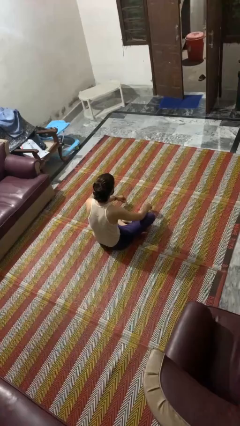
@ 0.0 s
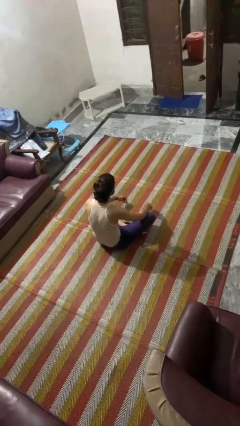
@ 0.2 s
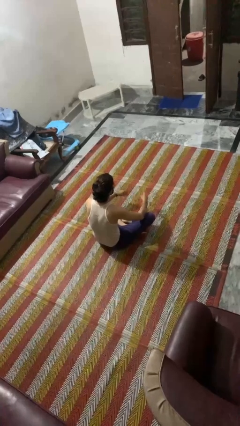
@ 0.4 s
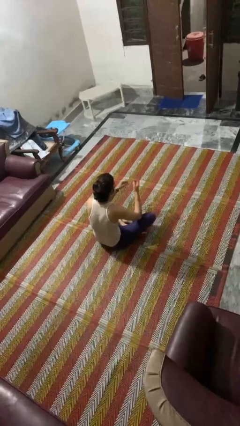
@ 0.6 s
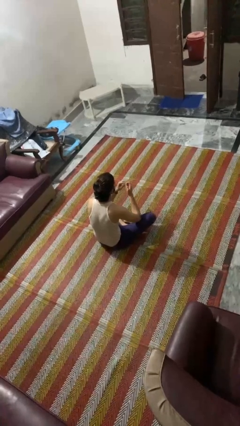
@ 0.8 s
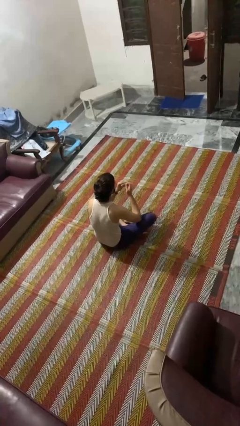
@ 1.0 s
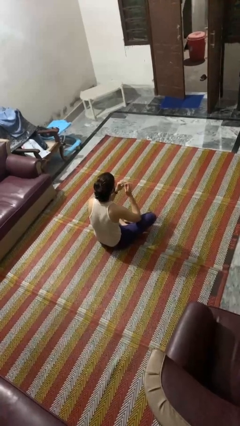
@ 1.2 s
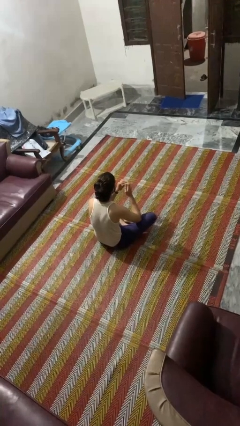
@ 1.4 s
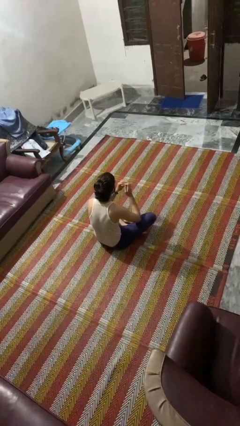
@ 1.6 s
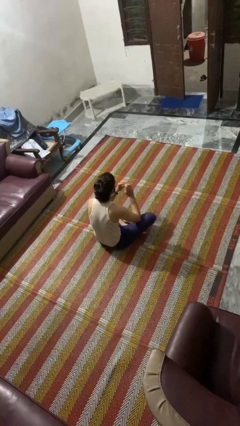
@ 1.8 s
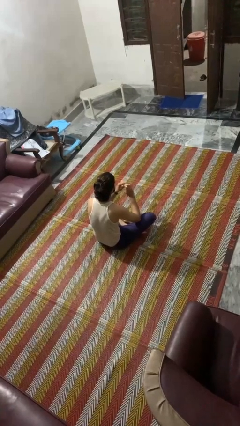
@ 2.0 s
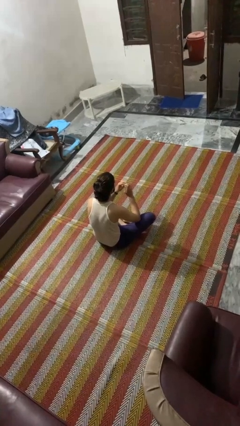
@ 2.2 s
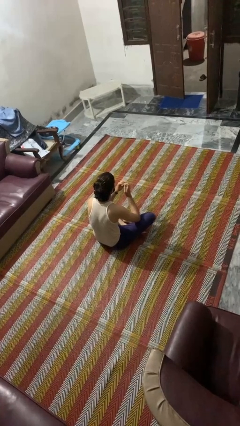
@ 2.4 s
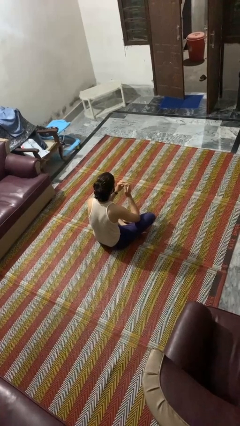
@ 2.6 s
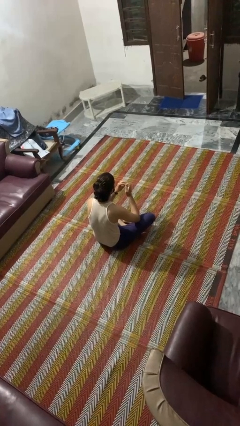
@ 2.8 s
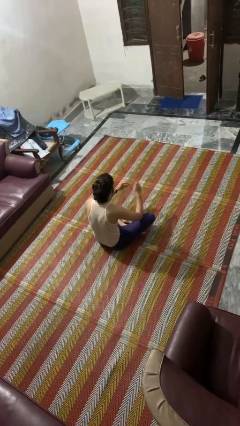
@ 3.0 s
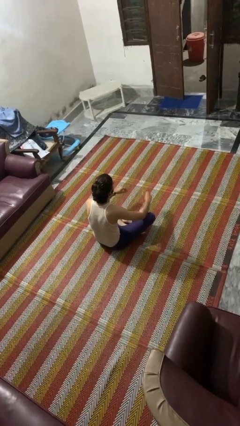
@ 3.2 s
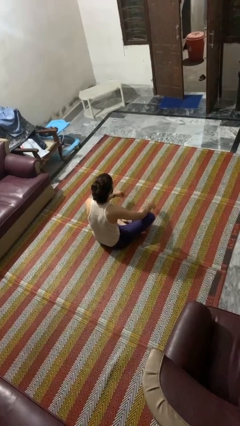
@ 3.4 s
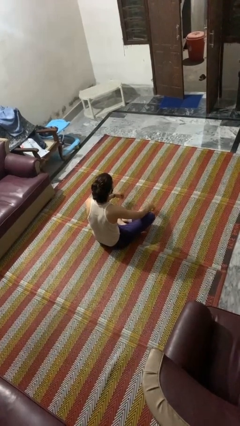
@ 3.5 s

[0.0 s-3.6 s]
person files fingernails

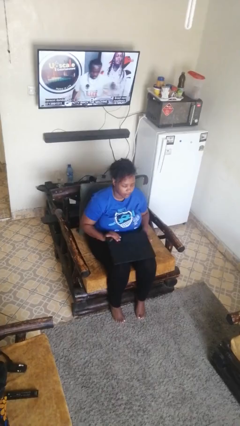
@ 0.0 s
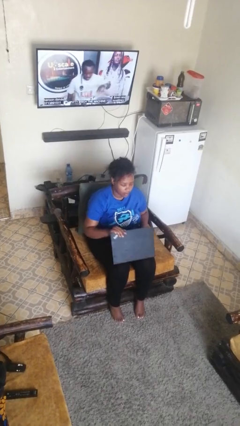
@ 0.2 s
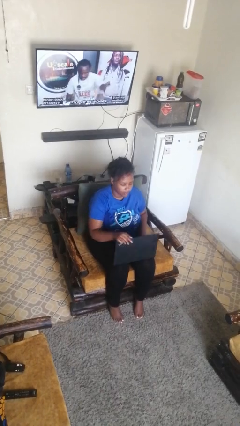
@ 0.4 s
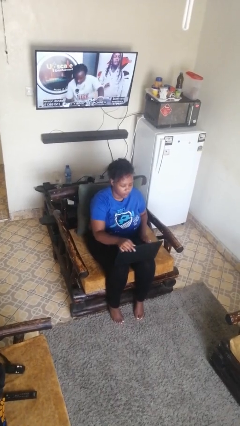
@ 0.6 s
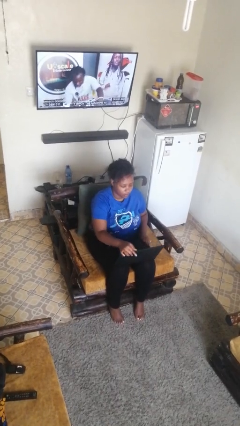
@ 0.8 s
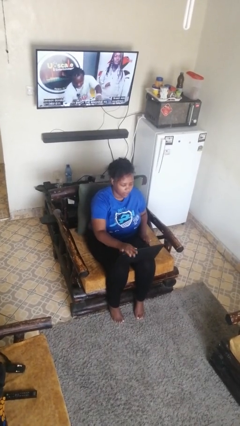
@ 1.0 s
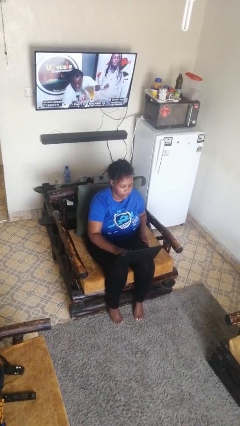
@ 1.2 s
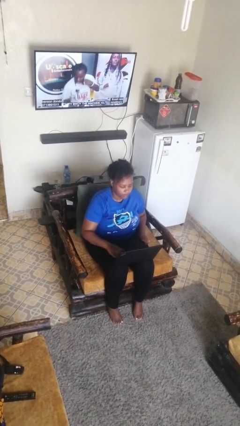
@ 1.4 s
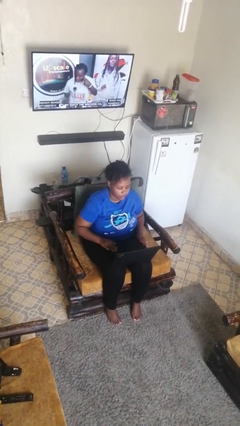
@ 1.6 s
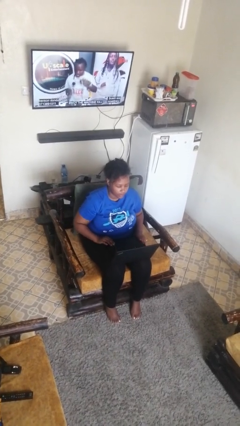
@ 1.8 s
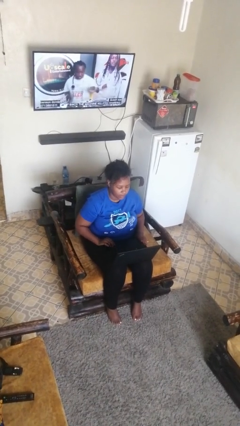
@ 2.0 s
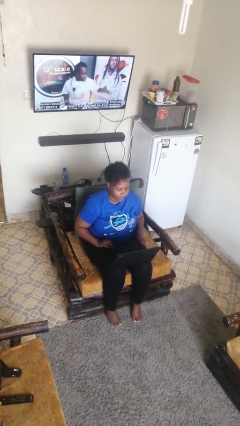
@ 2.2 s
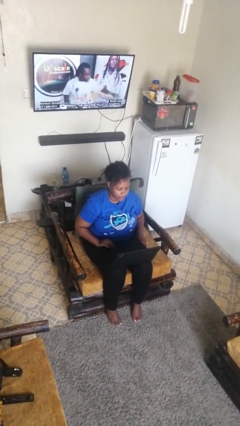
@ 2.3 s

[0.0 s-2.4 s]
person opens laptop

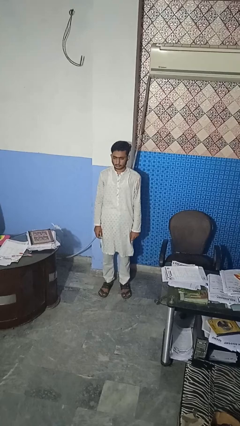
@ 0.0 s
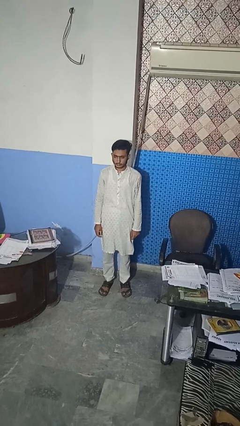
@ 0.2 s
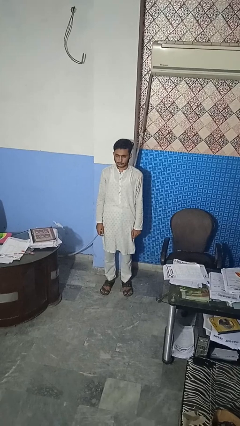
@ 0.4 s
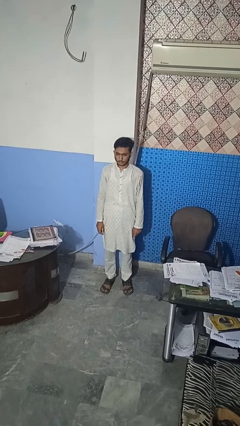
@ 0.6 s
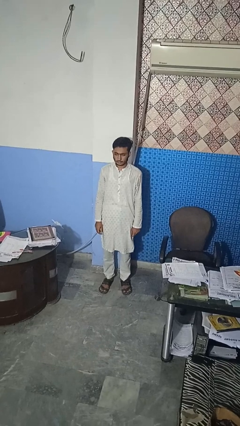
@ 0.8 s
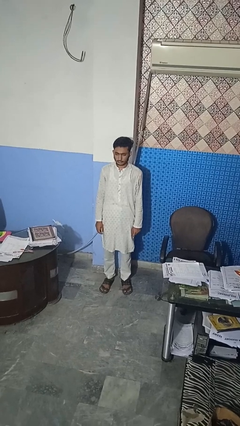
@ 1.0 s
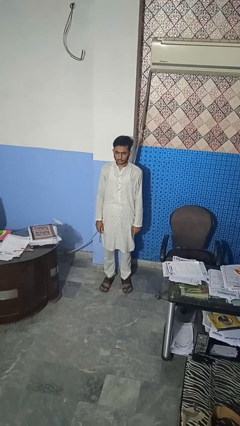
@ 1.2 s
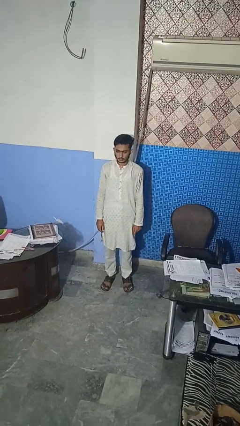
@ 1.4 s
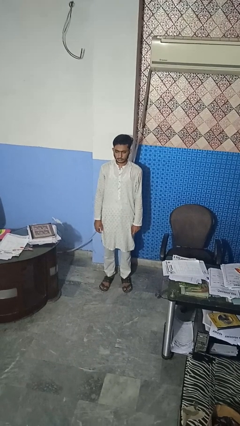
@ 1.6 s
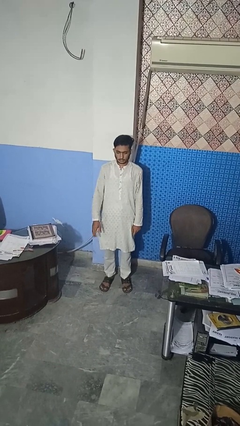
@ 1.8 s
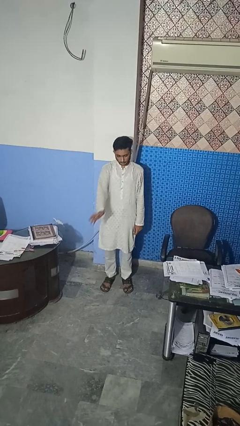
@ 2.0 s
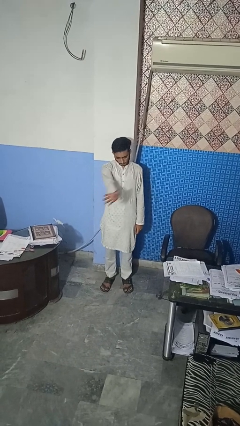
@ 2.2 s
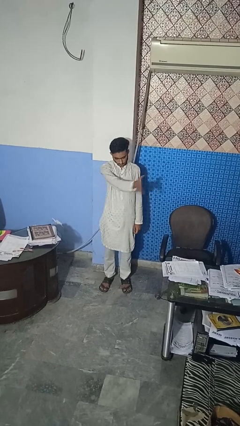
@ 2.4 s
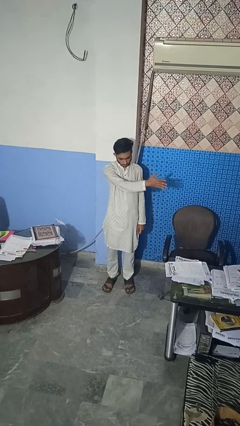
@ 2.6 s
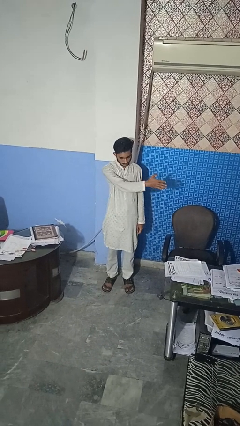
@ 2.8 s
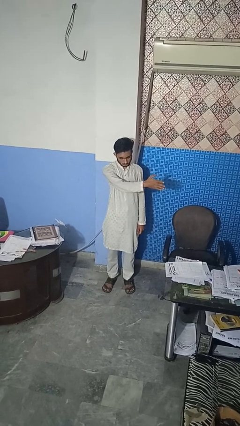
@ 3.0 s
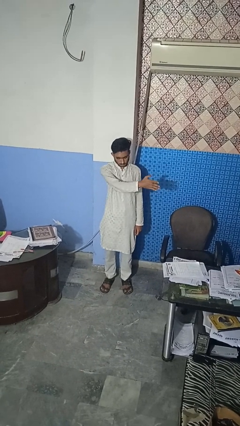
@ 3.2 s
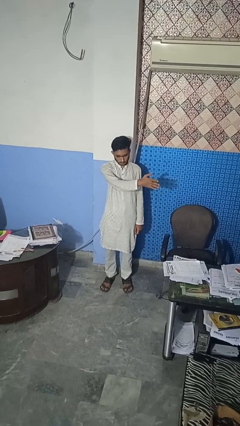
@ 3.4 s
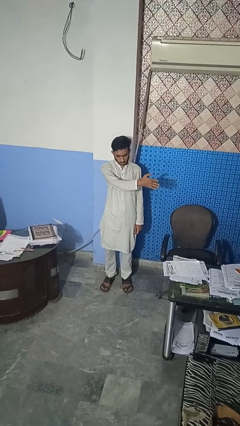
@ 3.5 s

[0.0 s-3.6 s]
person gestures swipe left

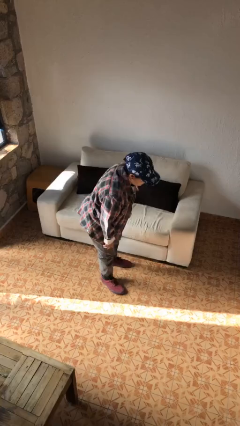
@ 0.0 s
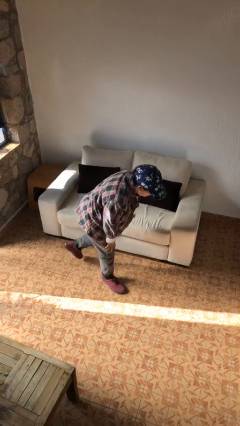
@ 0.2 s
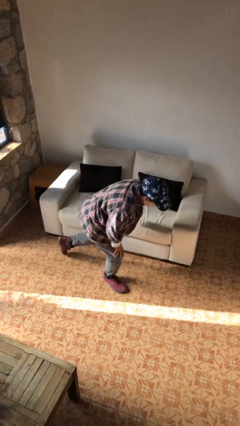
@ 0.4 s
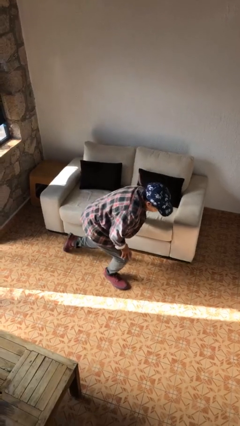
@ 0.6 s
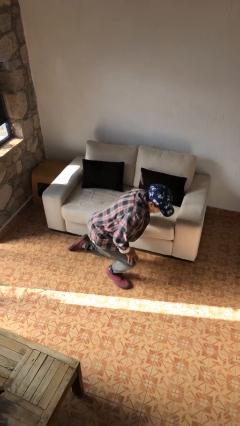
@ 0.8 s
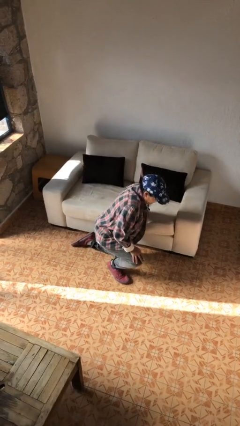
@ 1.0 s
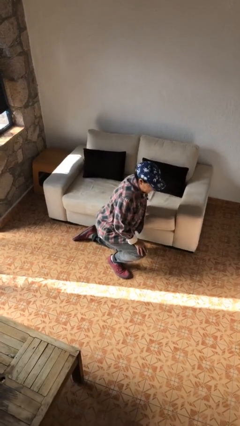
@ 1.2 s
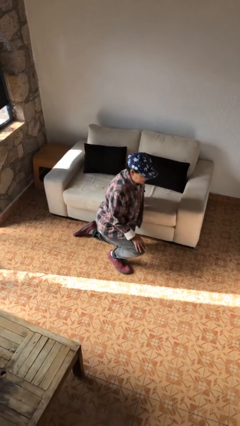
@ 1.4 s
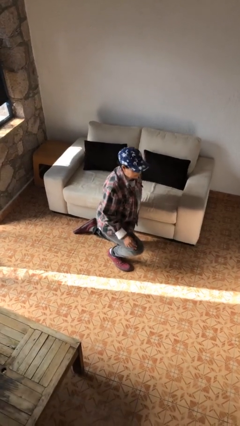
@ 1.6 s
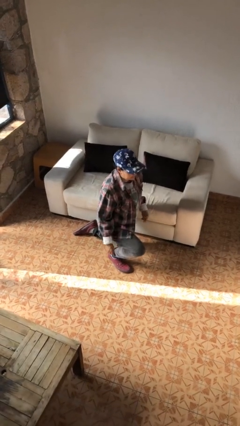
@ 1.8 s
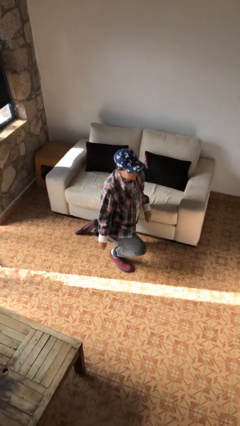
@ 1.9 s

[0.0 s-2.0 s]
person kneels

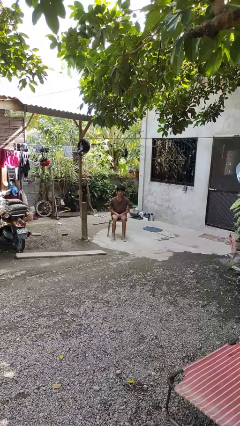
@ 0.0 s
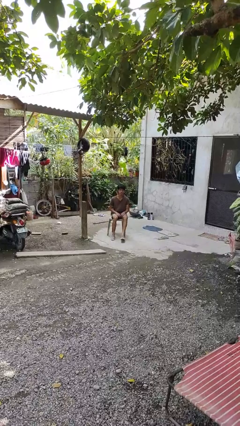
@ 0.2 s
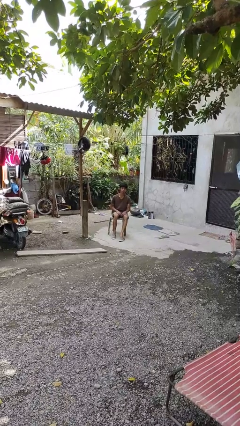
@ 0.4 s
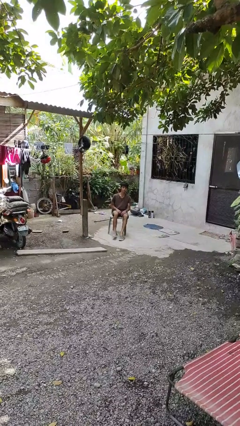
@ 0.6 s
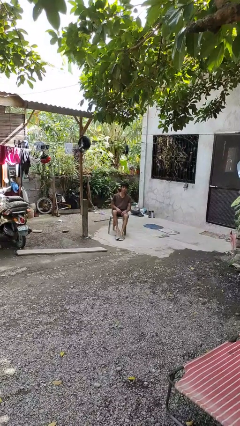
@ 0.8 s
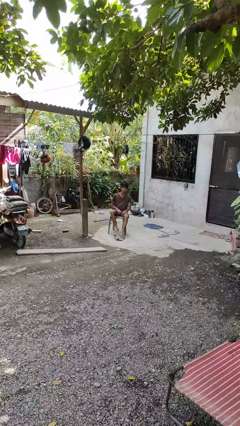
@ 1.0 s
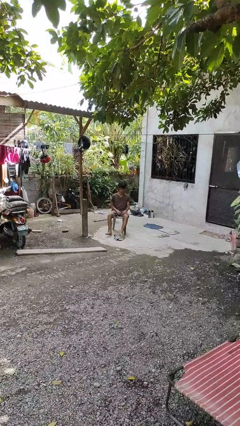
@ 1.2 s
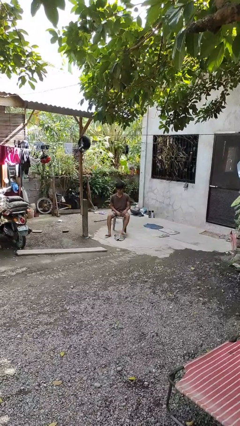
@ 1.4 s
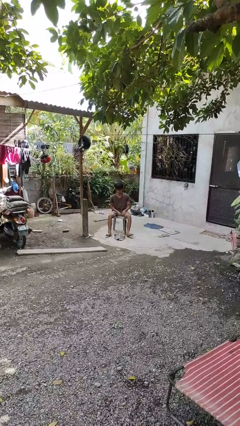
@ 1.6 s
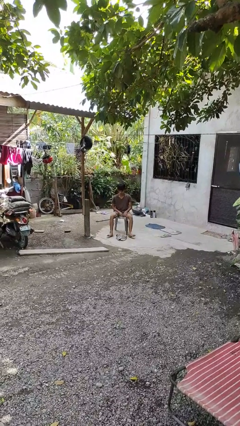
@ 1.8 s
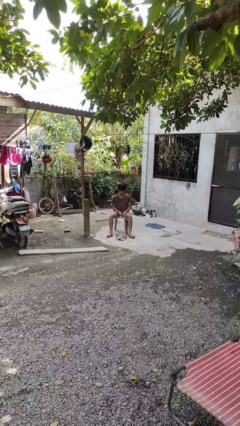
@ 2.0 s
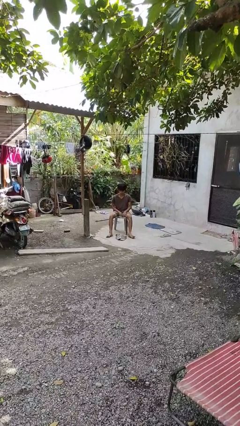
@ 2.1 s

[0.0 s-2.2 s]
person takes off shoes

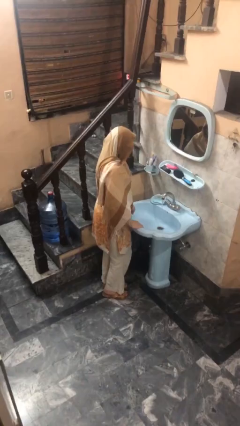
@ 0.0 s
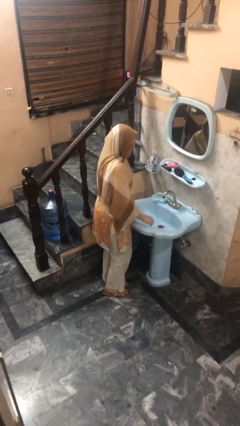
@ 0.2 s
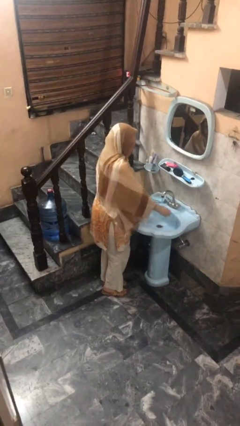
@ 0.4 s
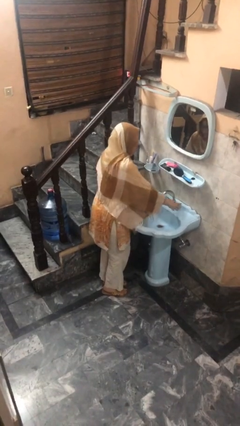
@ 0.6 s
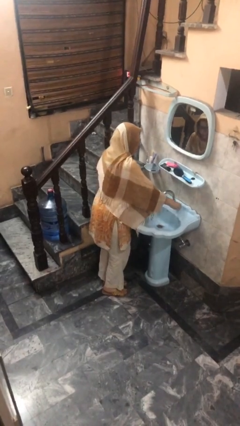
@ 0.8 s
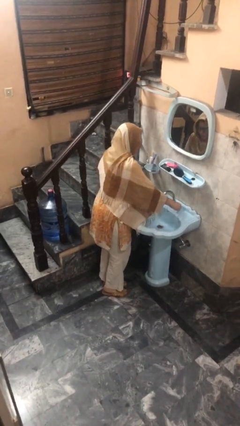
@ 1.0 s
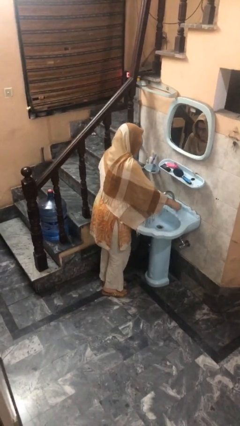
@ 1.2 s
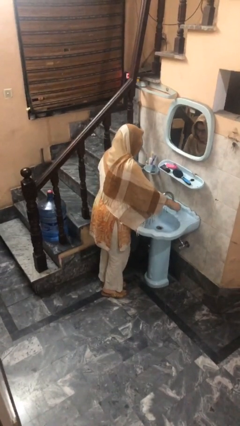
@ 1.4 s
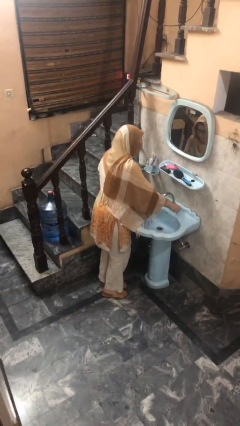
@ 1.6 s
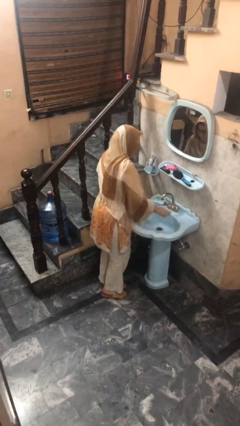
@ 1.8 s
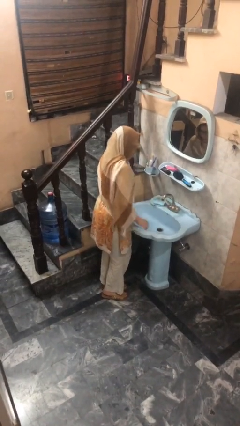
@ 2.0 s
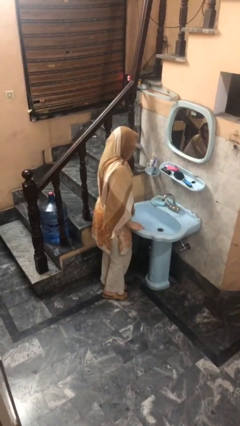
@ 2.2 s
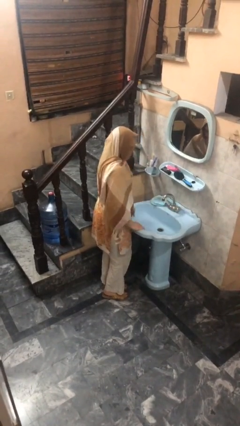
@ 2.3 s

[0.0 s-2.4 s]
person turns off faucet

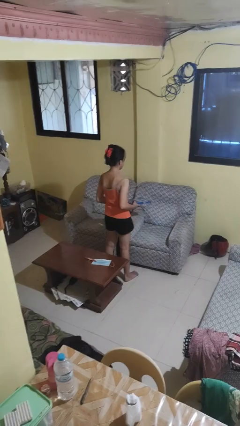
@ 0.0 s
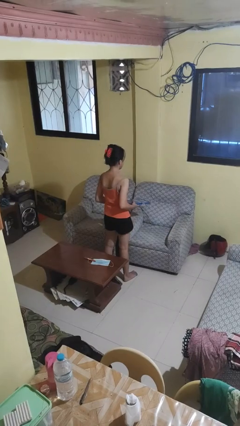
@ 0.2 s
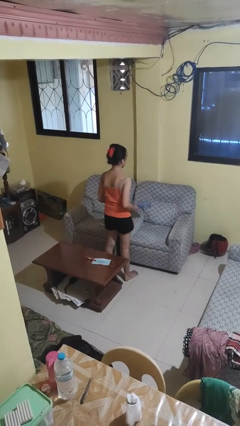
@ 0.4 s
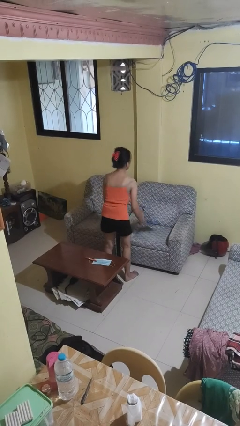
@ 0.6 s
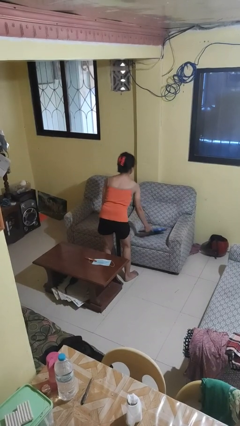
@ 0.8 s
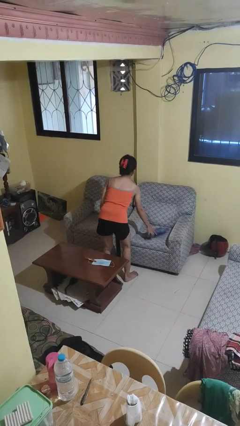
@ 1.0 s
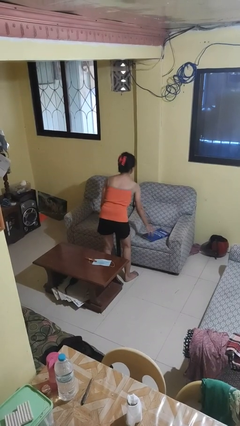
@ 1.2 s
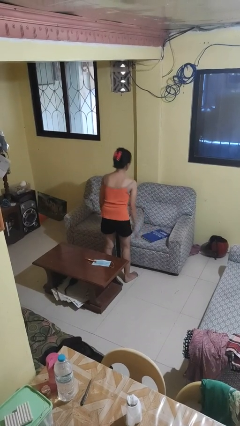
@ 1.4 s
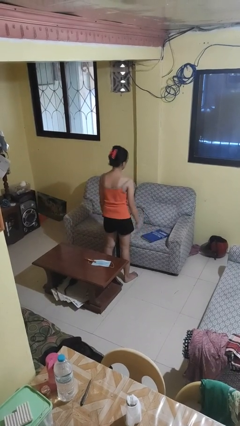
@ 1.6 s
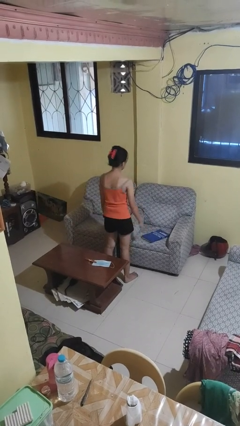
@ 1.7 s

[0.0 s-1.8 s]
person puts down object on couch
